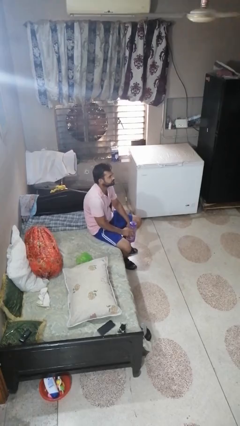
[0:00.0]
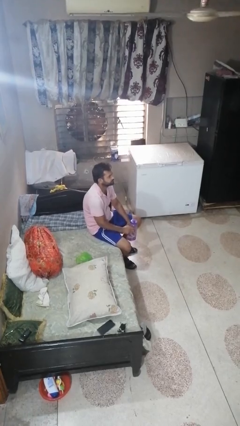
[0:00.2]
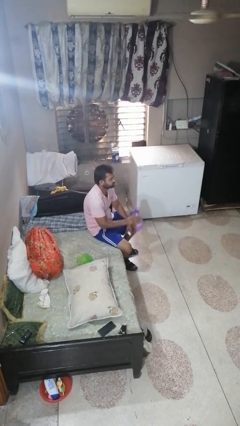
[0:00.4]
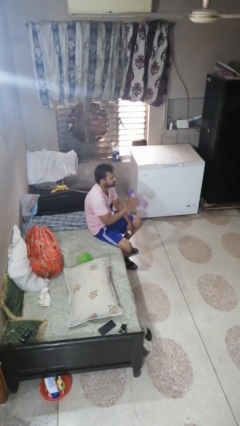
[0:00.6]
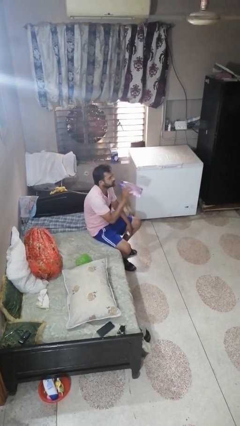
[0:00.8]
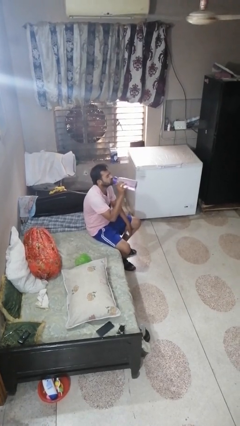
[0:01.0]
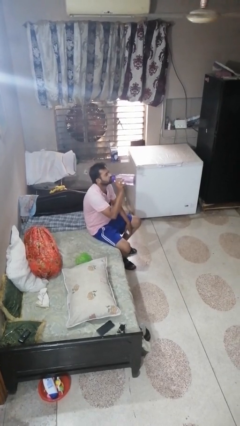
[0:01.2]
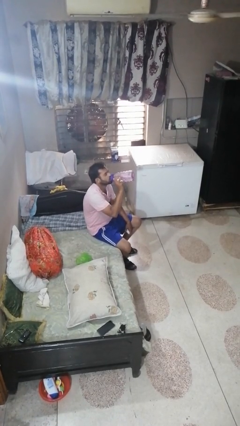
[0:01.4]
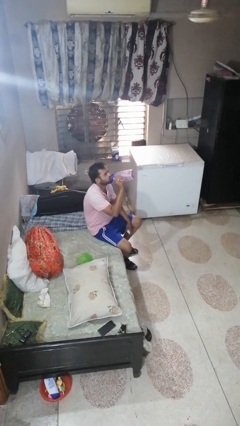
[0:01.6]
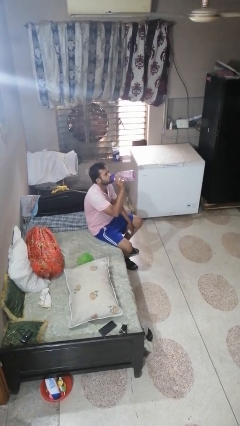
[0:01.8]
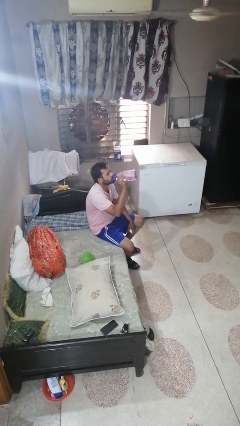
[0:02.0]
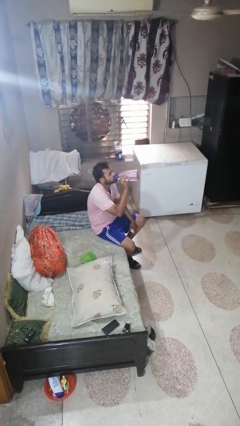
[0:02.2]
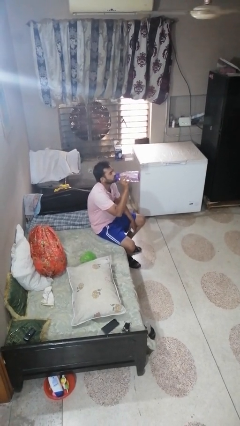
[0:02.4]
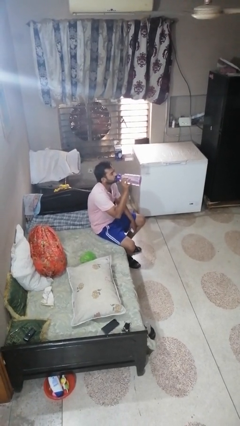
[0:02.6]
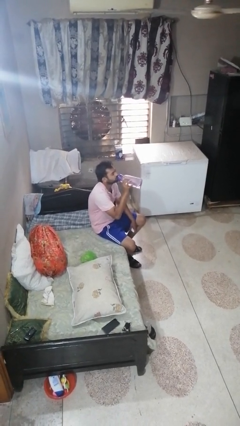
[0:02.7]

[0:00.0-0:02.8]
person drinks from bottle

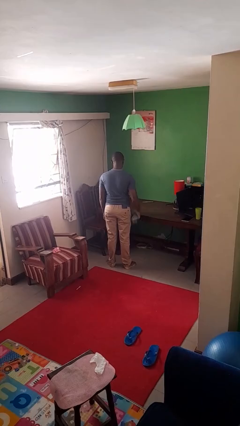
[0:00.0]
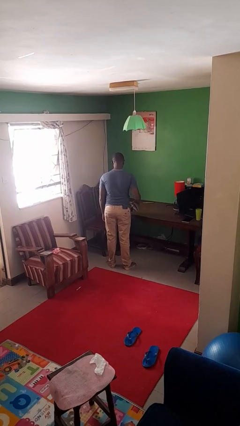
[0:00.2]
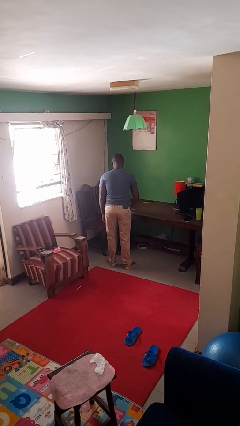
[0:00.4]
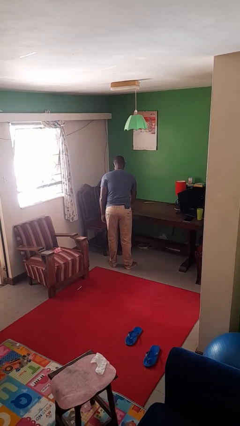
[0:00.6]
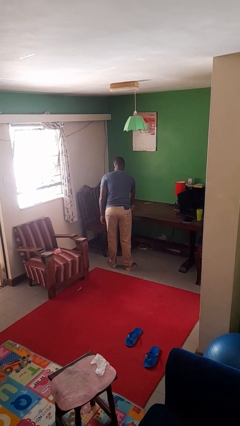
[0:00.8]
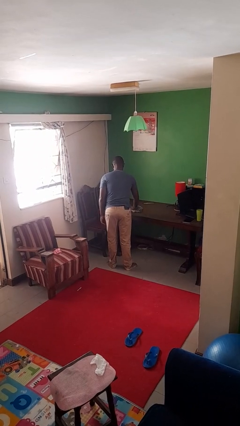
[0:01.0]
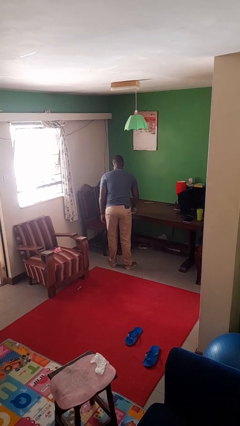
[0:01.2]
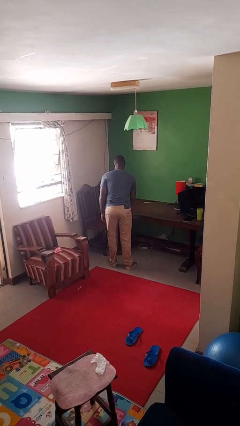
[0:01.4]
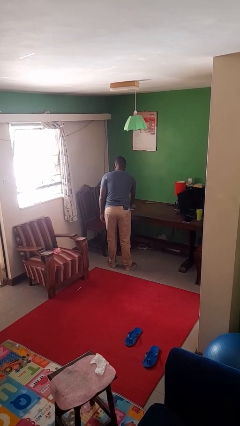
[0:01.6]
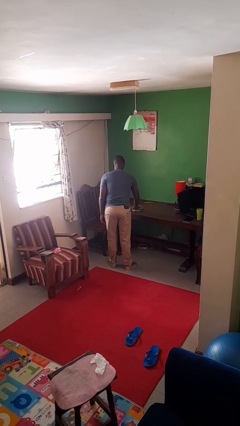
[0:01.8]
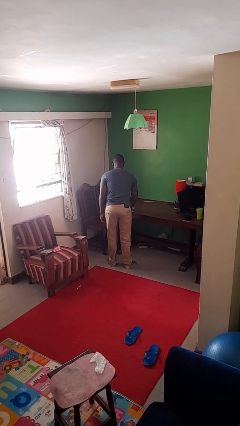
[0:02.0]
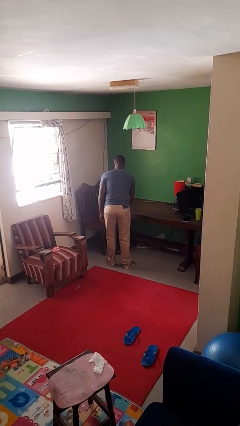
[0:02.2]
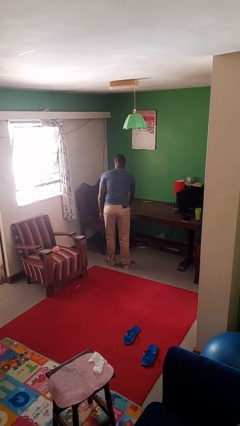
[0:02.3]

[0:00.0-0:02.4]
person cleans table with rag

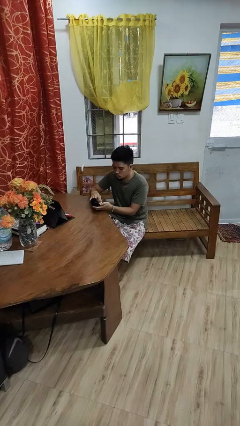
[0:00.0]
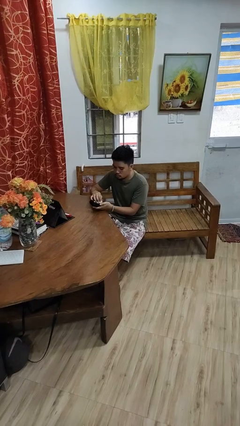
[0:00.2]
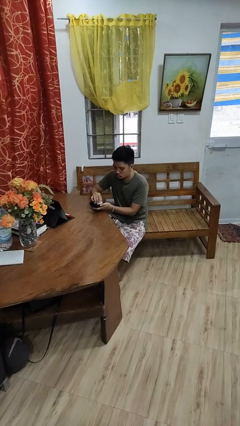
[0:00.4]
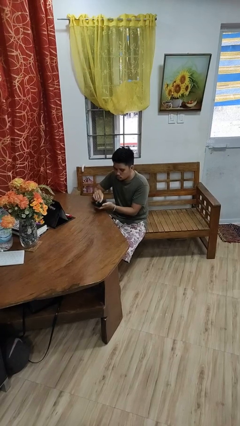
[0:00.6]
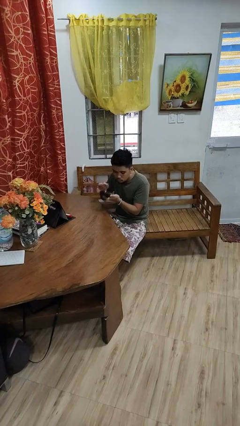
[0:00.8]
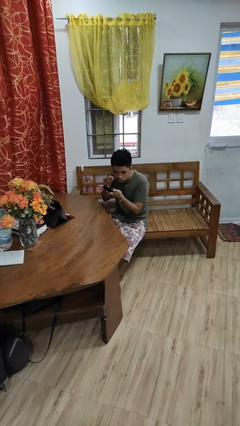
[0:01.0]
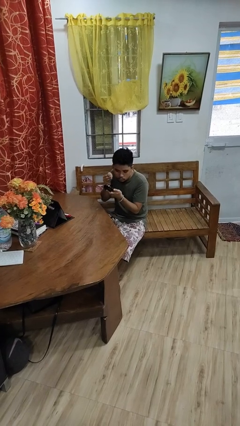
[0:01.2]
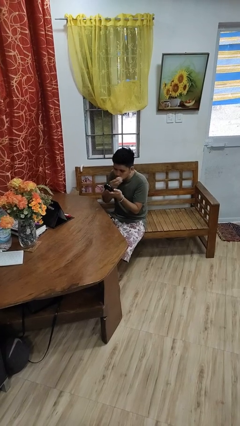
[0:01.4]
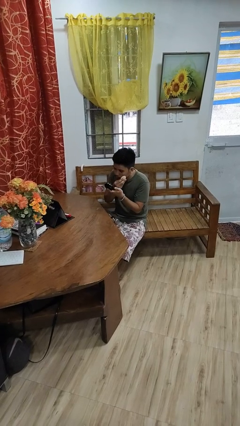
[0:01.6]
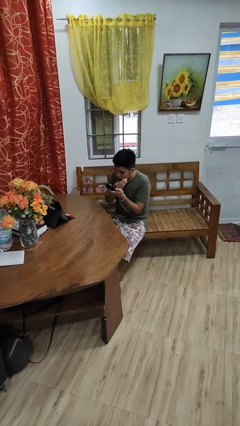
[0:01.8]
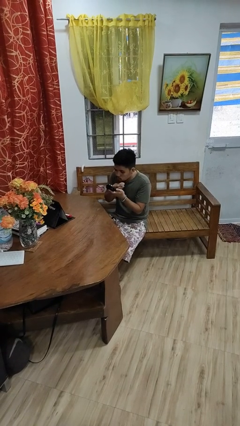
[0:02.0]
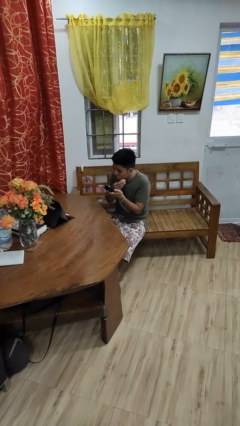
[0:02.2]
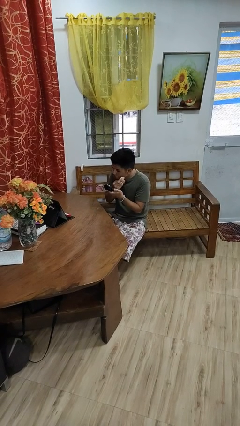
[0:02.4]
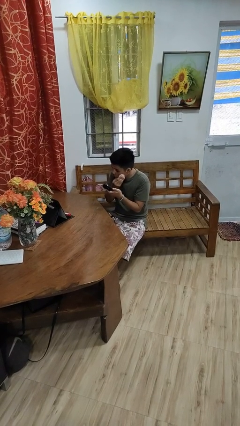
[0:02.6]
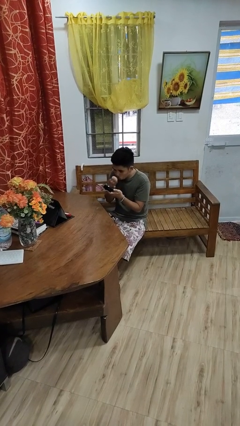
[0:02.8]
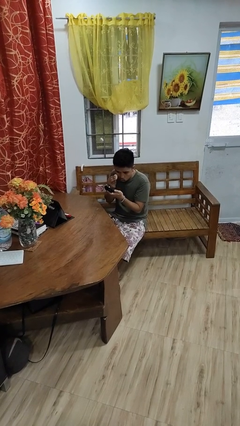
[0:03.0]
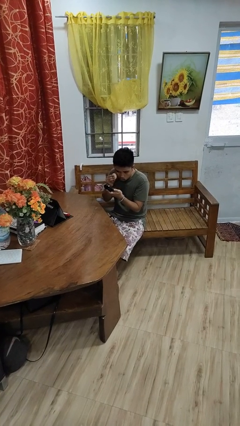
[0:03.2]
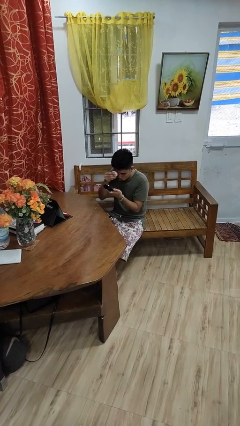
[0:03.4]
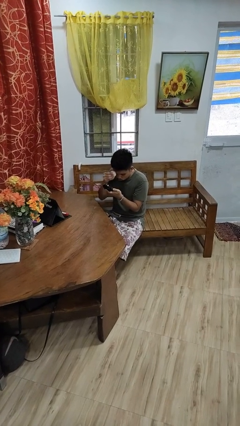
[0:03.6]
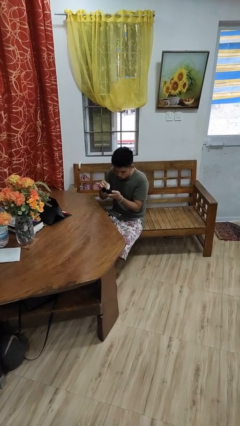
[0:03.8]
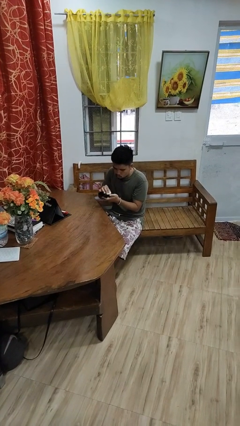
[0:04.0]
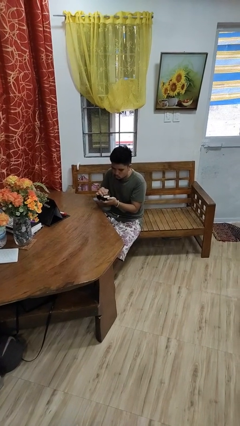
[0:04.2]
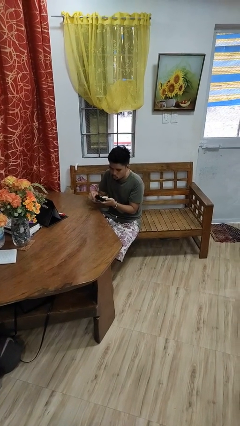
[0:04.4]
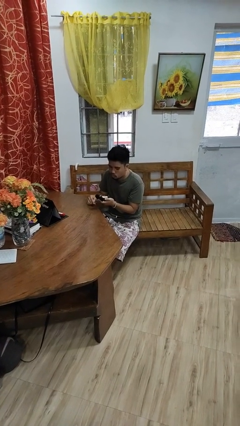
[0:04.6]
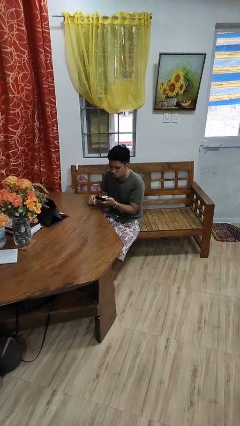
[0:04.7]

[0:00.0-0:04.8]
person applies foundation makeup

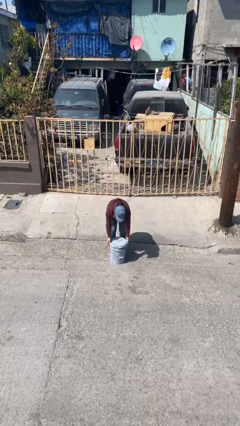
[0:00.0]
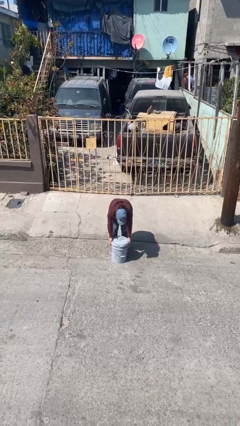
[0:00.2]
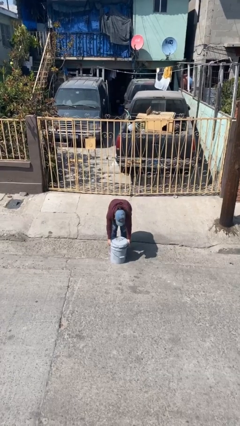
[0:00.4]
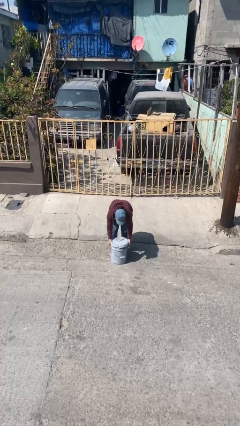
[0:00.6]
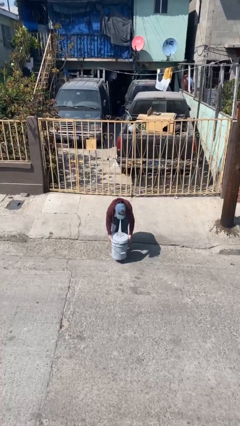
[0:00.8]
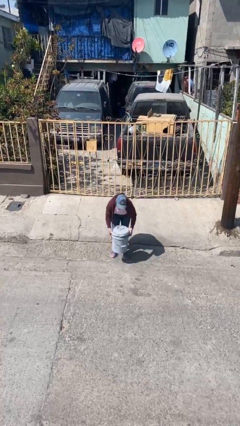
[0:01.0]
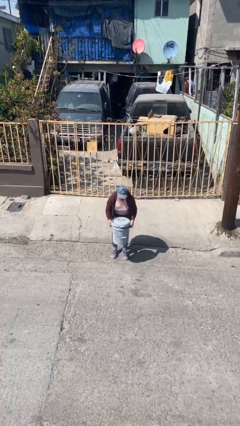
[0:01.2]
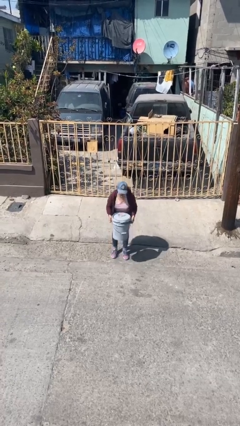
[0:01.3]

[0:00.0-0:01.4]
person picks up object from floor

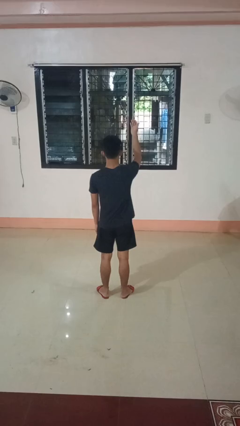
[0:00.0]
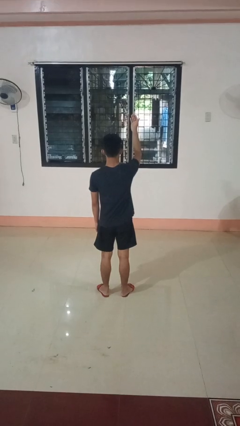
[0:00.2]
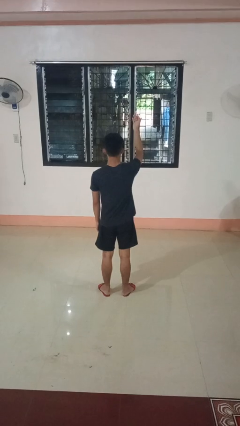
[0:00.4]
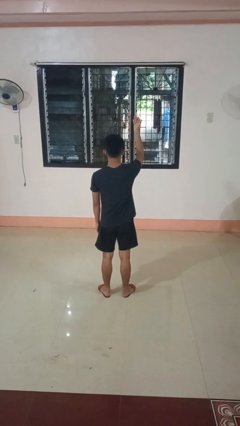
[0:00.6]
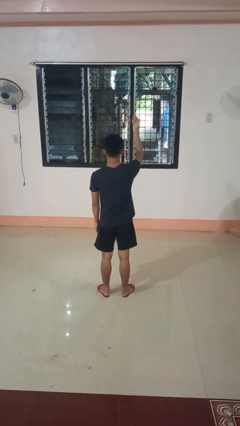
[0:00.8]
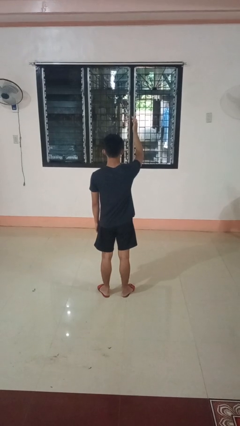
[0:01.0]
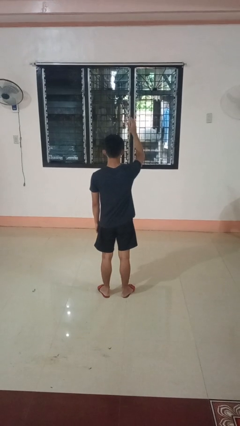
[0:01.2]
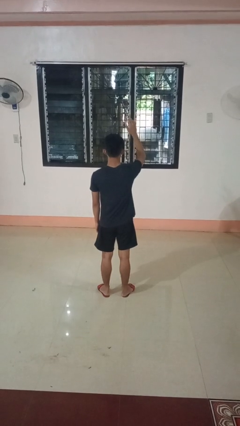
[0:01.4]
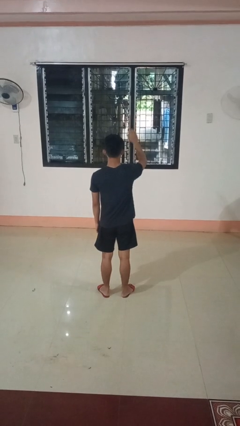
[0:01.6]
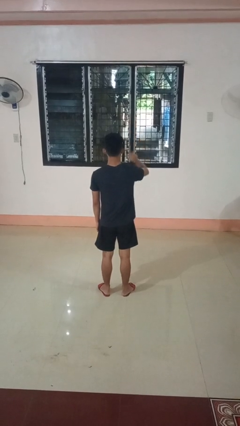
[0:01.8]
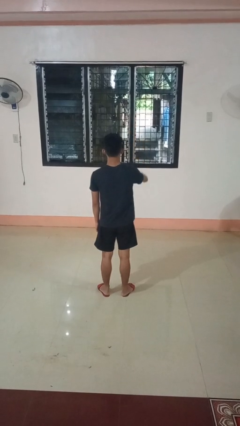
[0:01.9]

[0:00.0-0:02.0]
person gestures swipe up

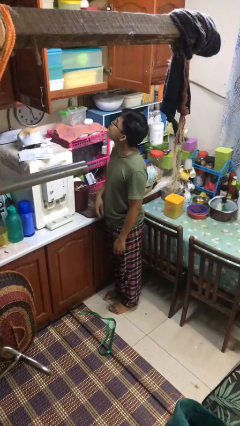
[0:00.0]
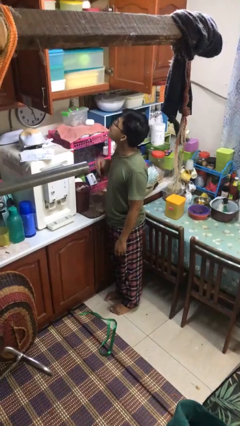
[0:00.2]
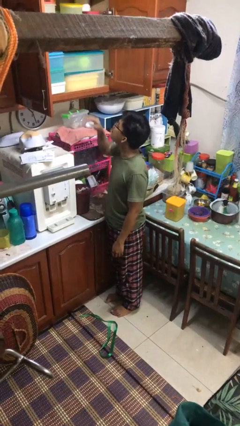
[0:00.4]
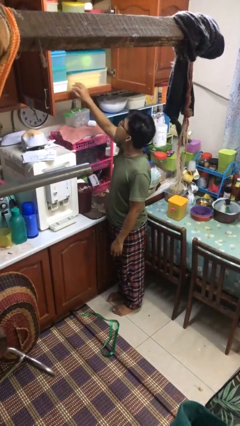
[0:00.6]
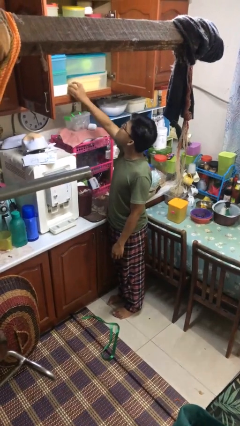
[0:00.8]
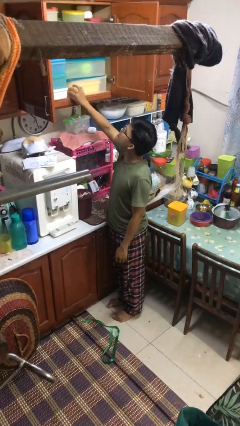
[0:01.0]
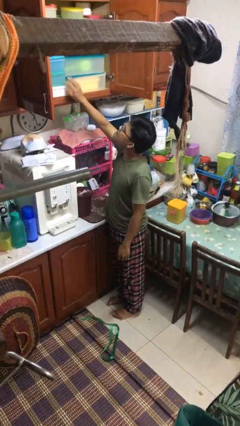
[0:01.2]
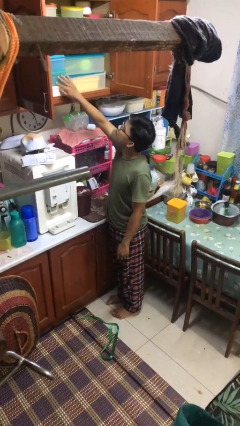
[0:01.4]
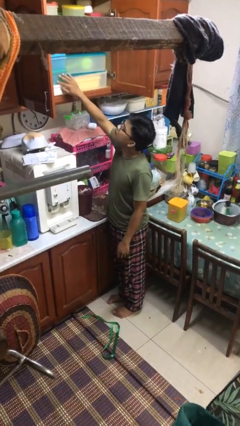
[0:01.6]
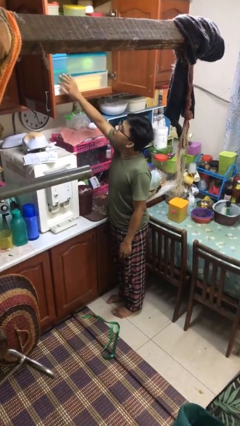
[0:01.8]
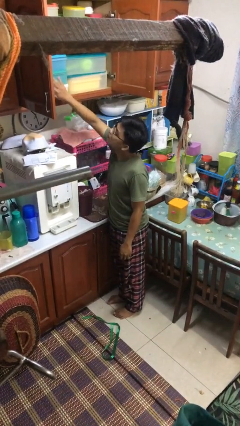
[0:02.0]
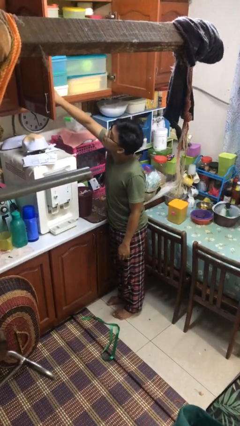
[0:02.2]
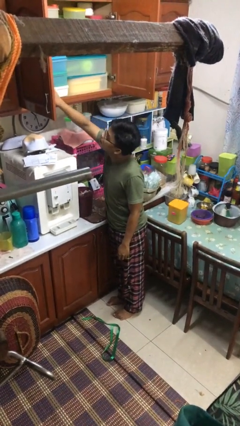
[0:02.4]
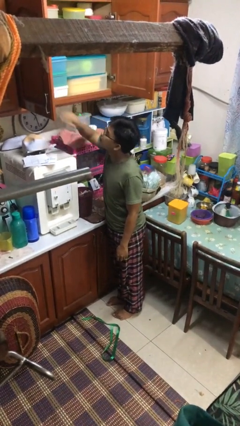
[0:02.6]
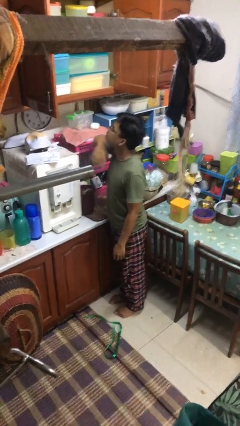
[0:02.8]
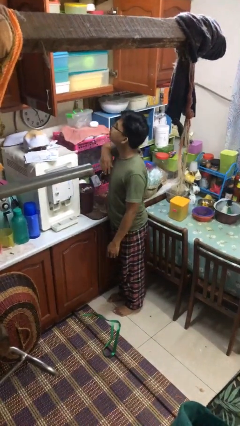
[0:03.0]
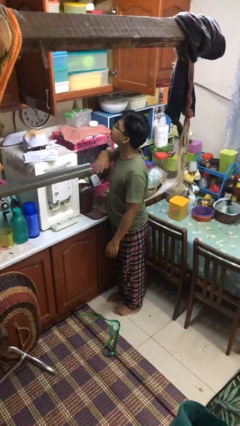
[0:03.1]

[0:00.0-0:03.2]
person searches in kitchen drawer

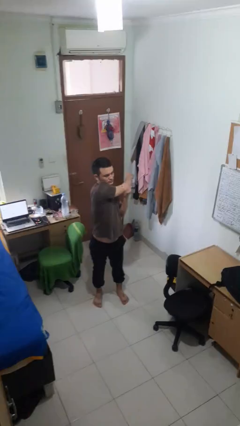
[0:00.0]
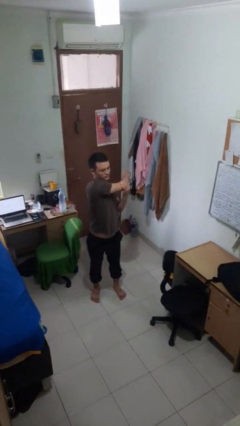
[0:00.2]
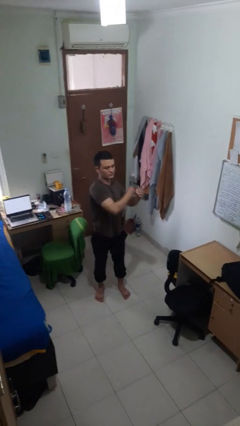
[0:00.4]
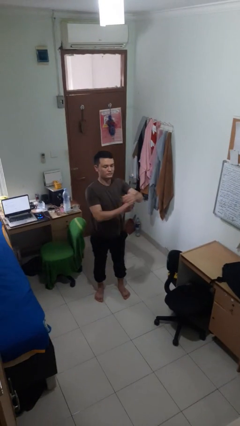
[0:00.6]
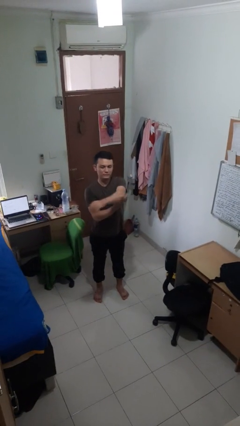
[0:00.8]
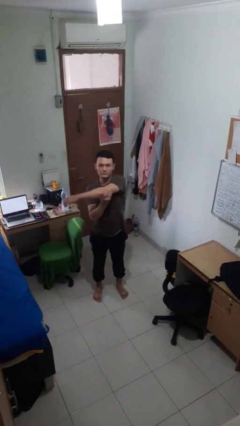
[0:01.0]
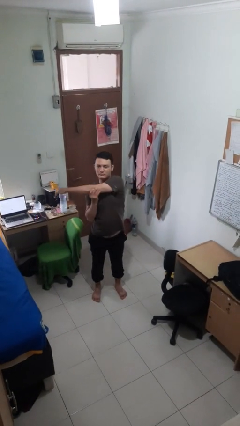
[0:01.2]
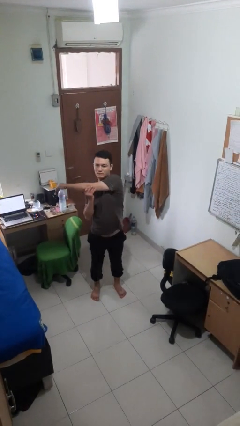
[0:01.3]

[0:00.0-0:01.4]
person stretches arms to side
